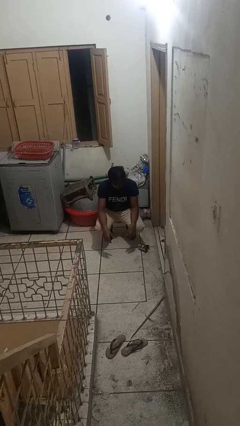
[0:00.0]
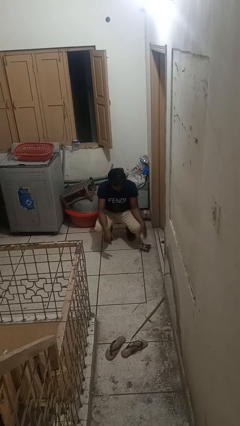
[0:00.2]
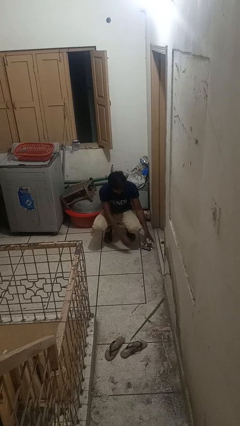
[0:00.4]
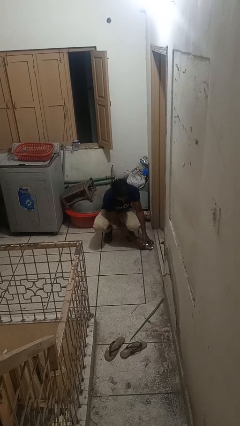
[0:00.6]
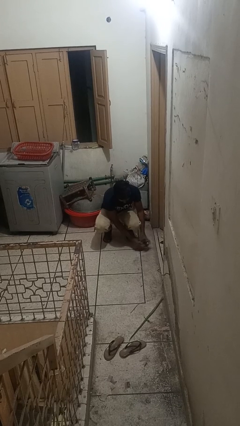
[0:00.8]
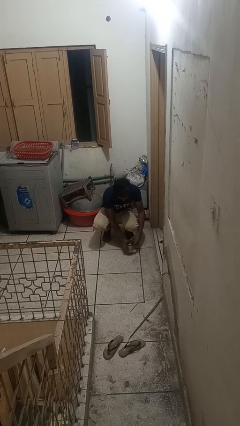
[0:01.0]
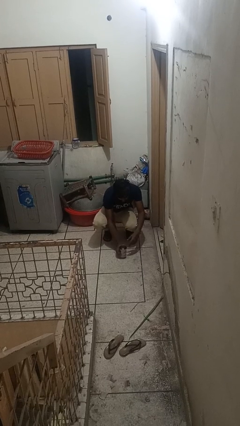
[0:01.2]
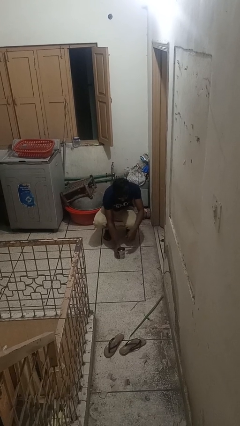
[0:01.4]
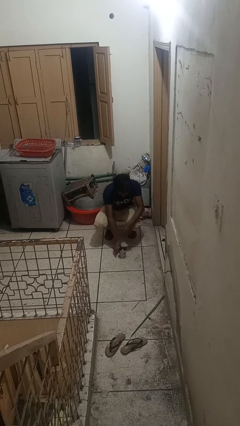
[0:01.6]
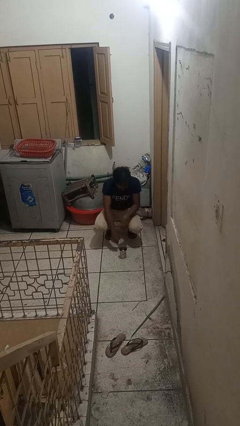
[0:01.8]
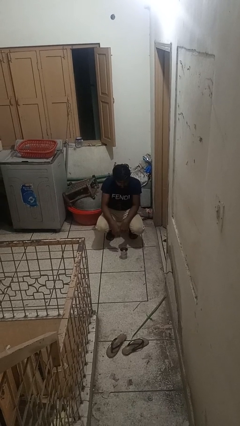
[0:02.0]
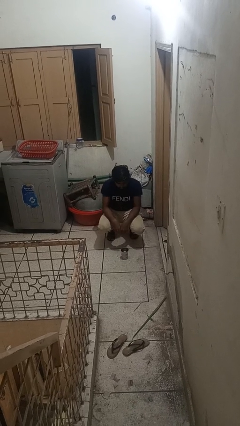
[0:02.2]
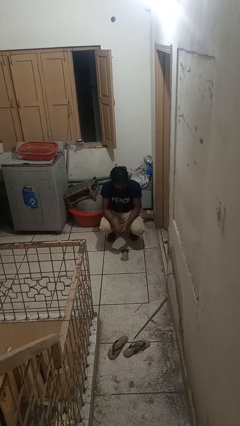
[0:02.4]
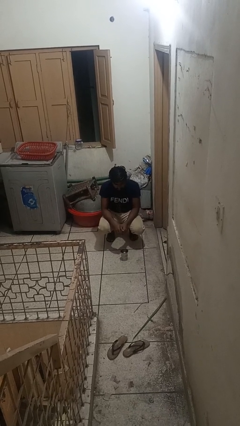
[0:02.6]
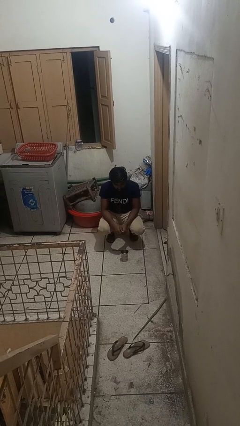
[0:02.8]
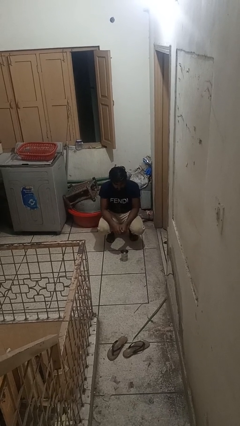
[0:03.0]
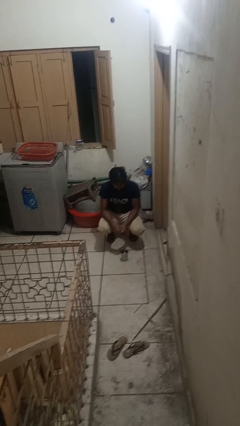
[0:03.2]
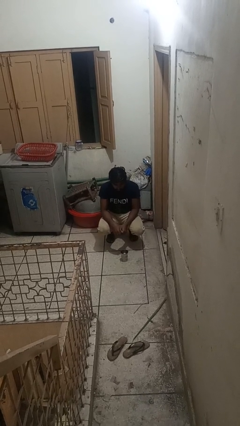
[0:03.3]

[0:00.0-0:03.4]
person sets upright glass

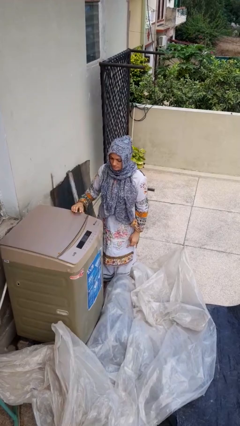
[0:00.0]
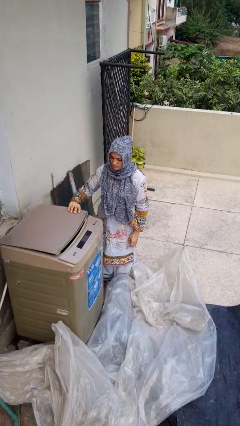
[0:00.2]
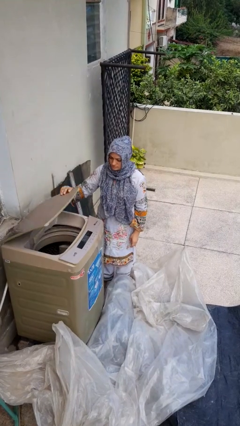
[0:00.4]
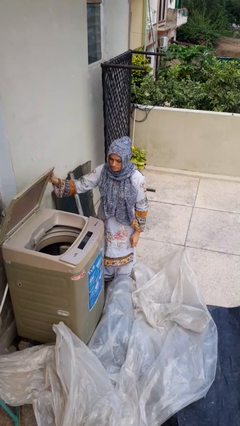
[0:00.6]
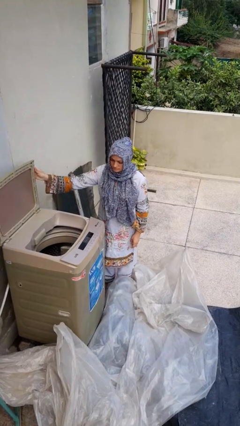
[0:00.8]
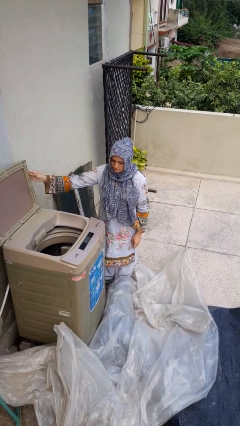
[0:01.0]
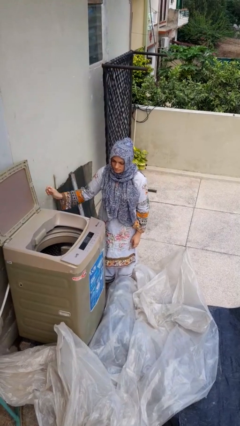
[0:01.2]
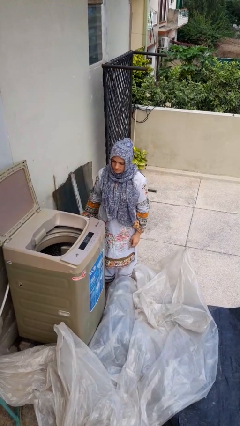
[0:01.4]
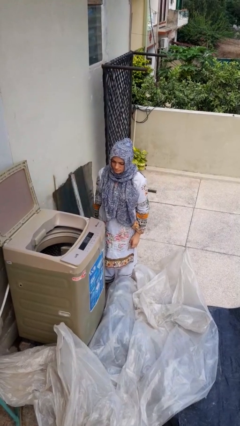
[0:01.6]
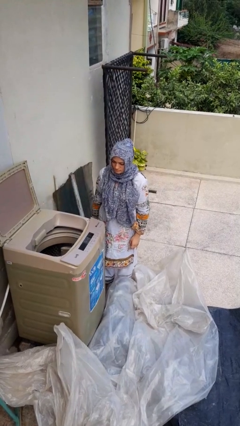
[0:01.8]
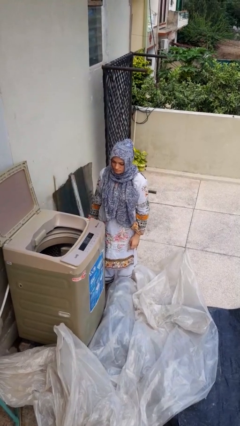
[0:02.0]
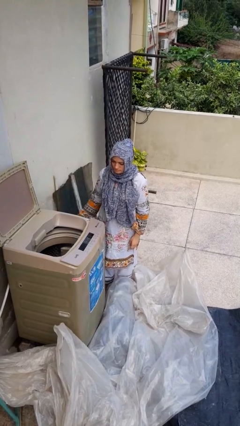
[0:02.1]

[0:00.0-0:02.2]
person opens clothes washer

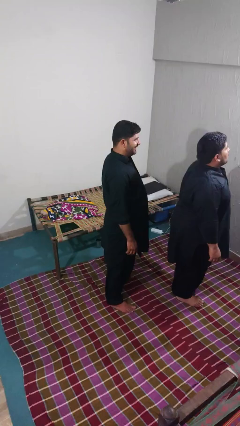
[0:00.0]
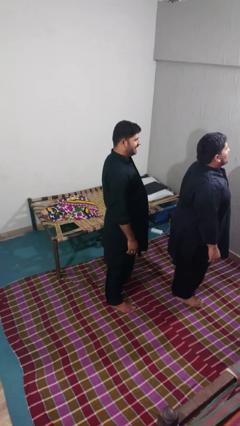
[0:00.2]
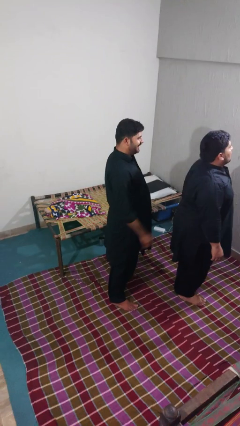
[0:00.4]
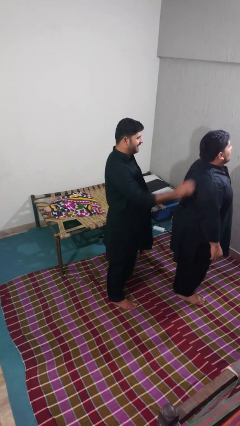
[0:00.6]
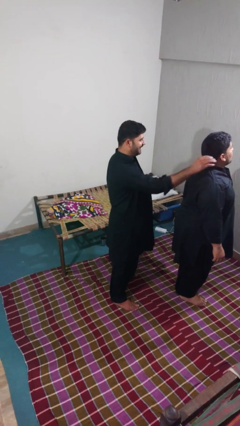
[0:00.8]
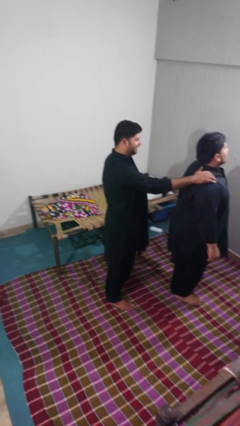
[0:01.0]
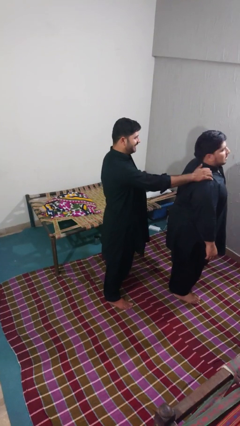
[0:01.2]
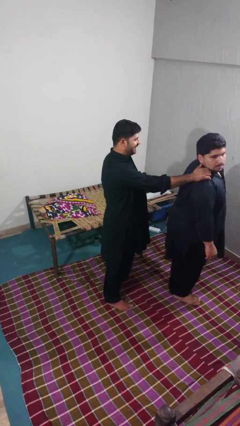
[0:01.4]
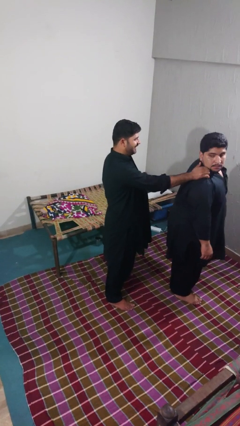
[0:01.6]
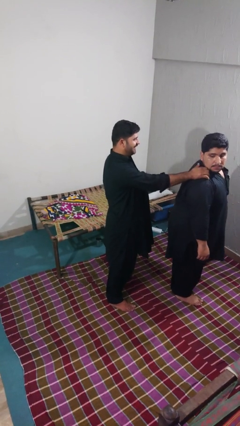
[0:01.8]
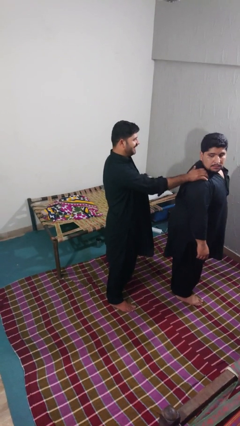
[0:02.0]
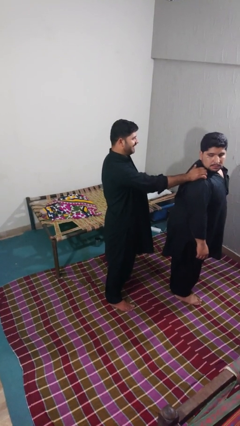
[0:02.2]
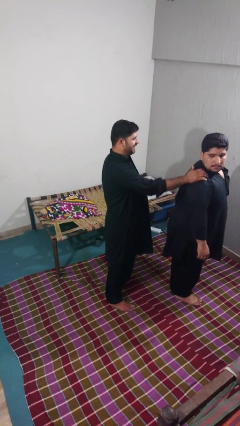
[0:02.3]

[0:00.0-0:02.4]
person touches back of person

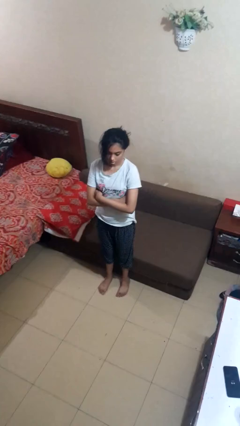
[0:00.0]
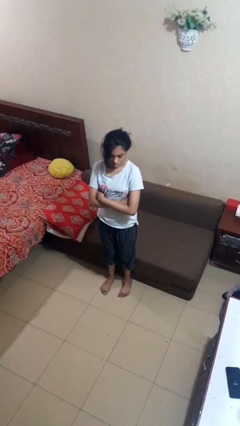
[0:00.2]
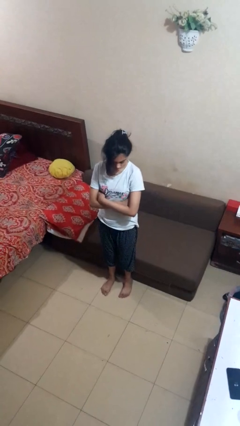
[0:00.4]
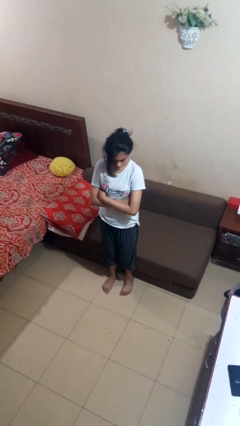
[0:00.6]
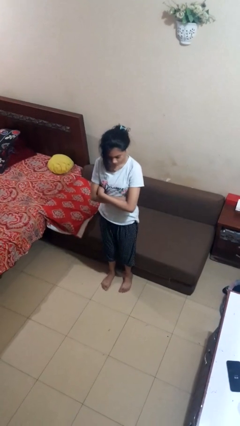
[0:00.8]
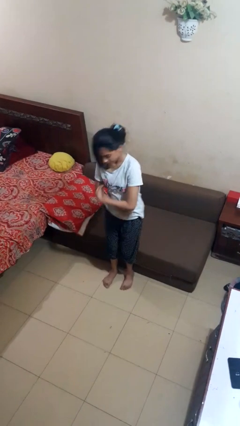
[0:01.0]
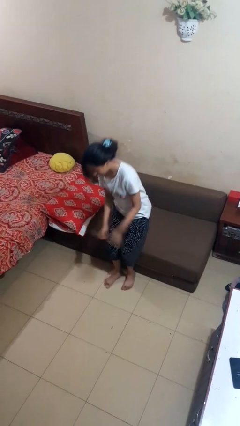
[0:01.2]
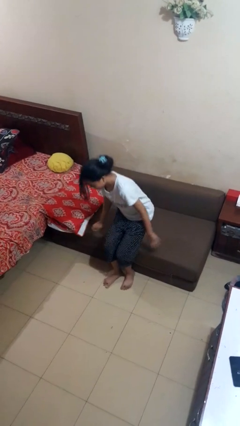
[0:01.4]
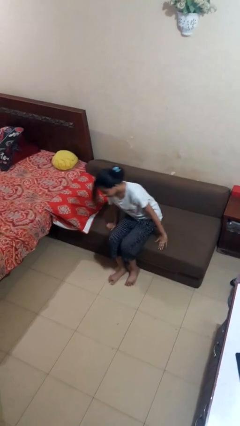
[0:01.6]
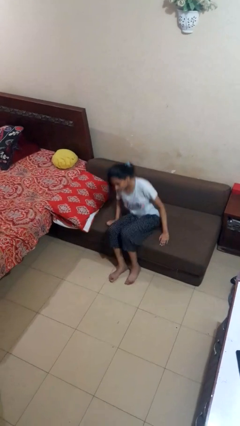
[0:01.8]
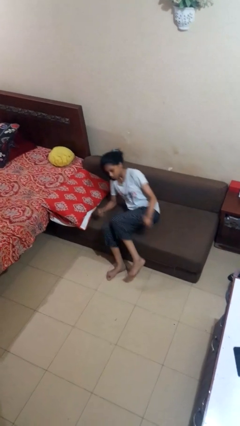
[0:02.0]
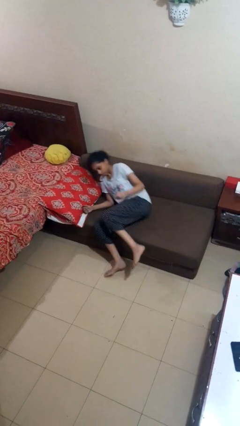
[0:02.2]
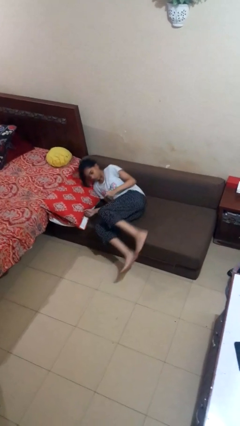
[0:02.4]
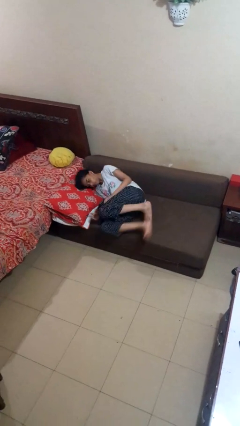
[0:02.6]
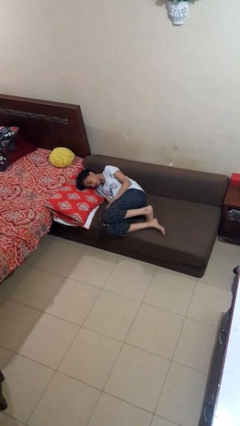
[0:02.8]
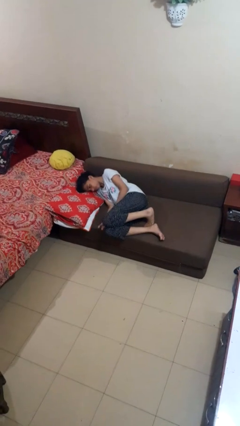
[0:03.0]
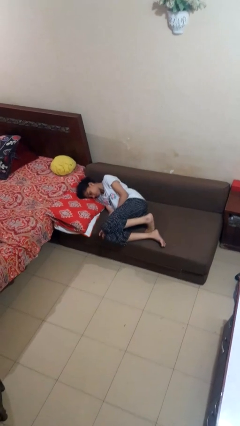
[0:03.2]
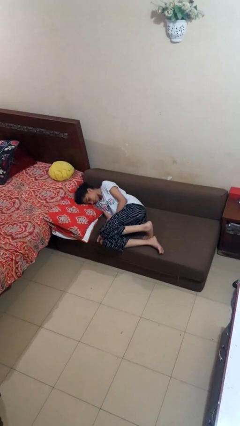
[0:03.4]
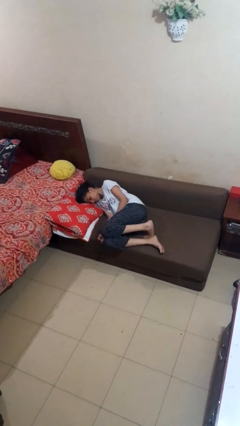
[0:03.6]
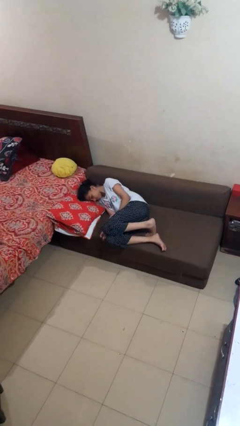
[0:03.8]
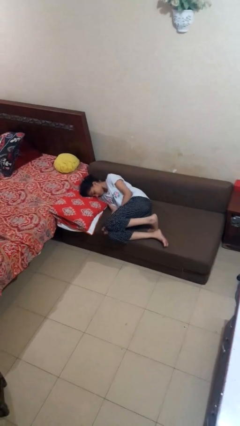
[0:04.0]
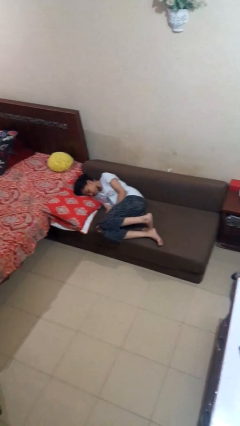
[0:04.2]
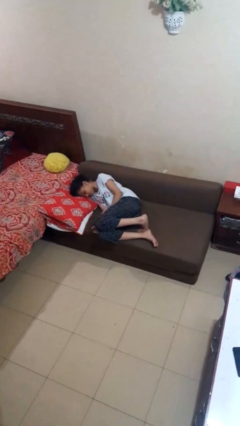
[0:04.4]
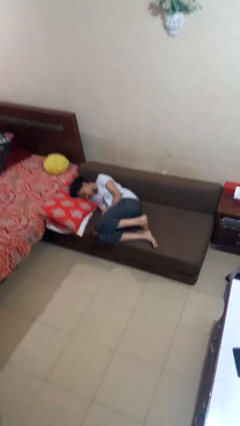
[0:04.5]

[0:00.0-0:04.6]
person lies down on couch

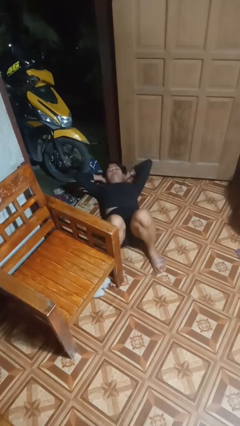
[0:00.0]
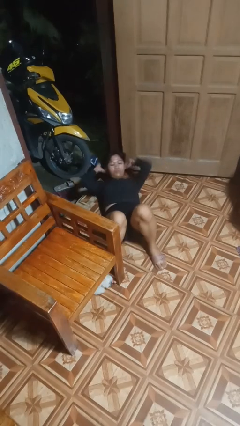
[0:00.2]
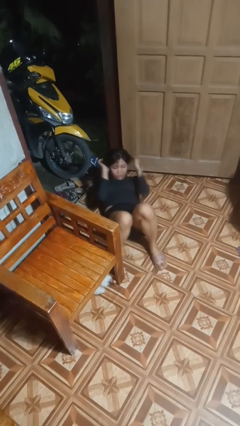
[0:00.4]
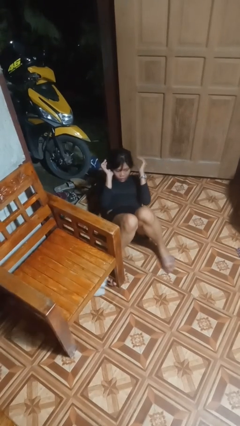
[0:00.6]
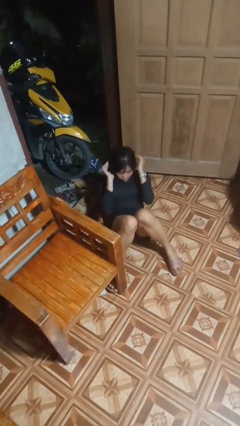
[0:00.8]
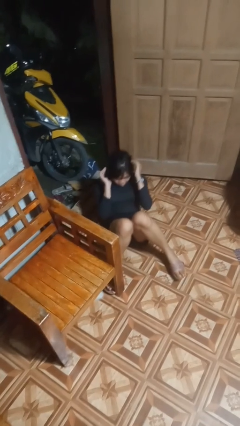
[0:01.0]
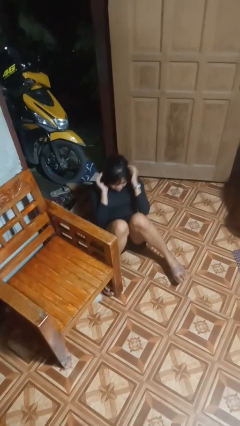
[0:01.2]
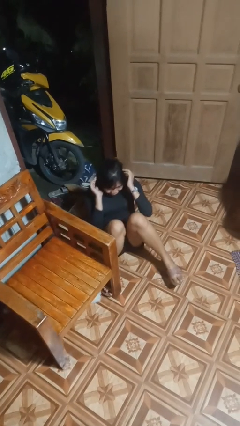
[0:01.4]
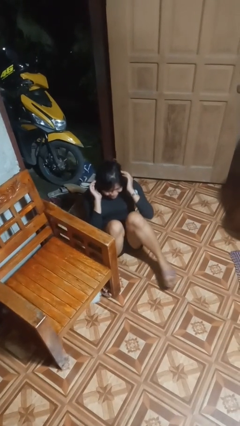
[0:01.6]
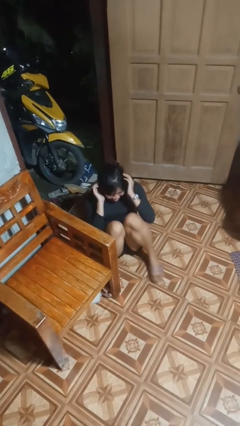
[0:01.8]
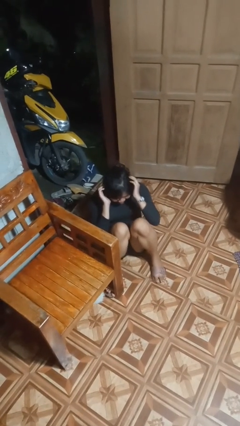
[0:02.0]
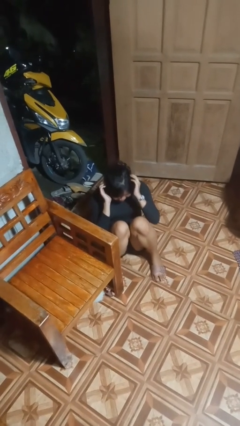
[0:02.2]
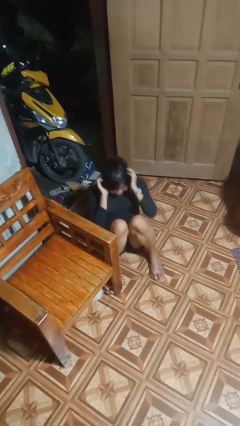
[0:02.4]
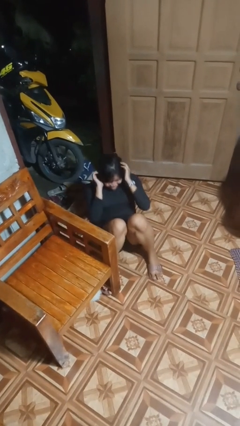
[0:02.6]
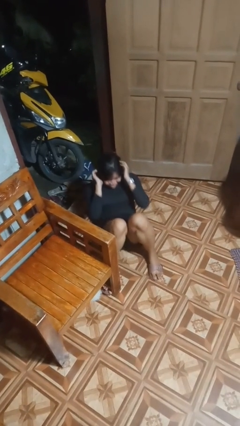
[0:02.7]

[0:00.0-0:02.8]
person exercises with situp

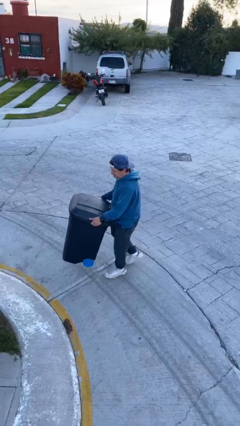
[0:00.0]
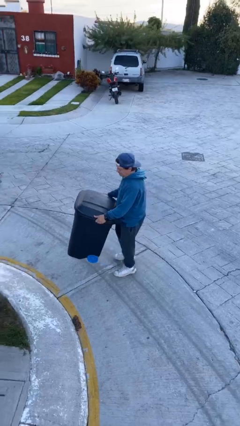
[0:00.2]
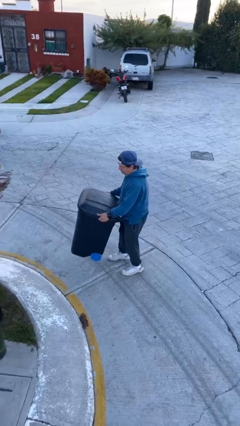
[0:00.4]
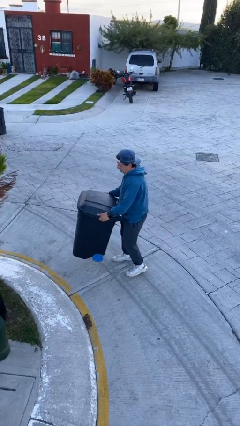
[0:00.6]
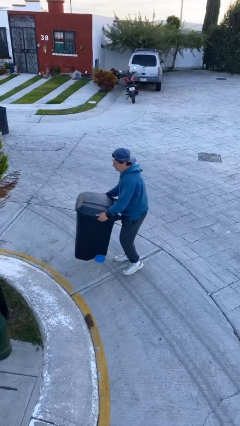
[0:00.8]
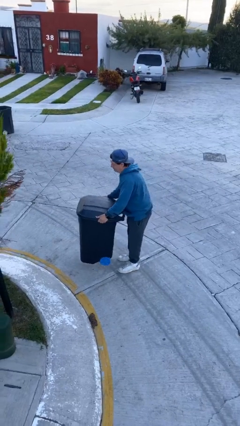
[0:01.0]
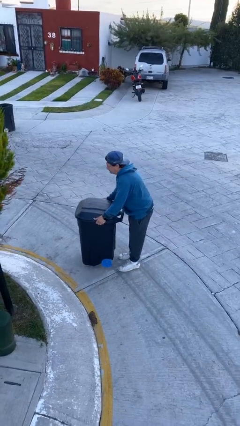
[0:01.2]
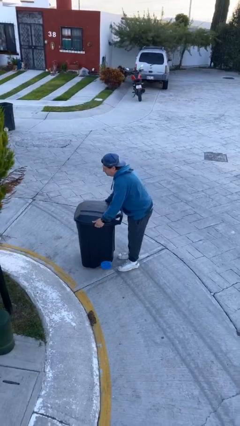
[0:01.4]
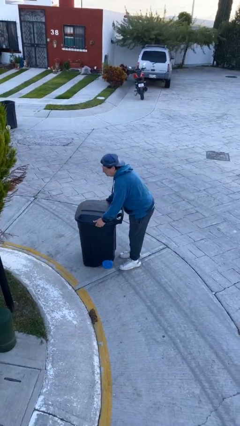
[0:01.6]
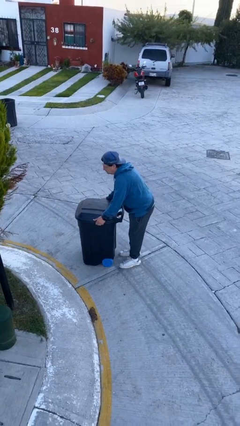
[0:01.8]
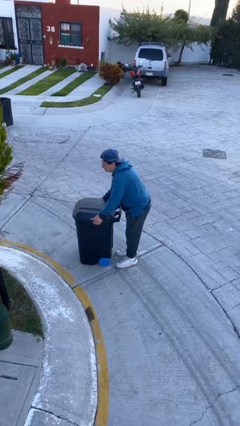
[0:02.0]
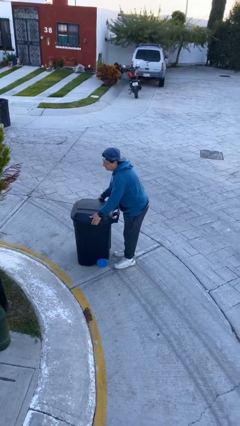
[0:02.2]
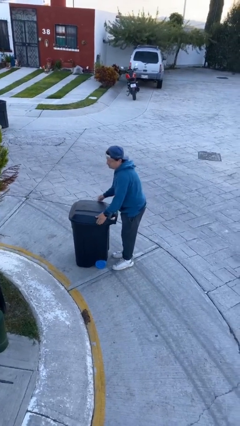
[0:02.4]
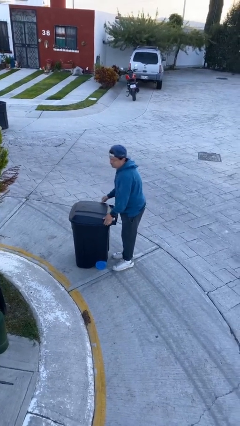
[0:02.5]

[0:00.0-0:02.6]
person puts down object on floor
